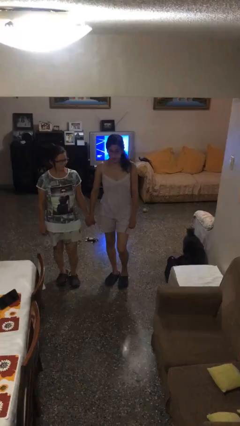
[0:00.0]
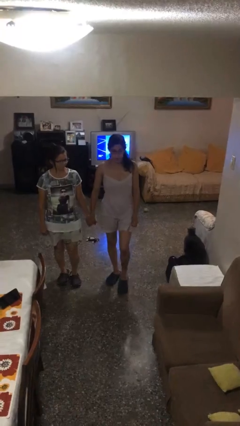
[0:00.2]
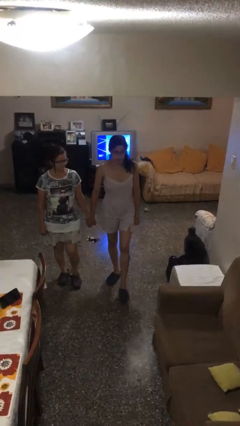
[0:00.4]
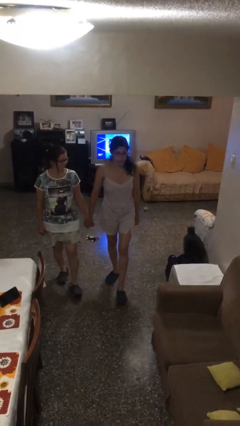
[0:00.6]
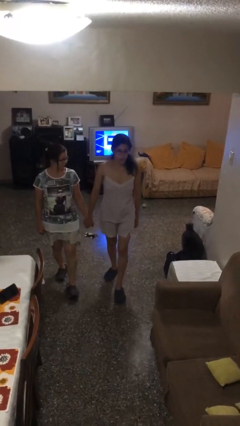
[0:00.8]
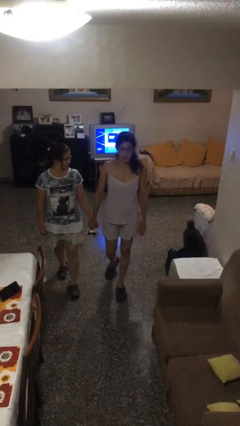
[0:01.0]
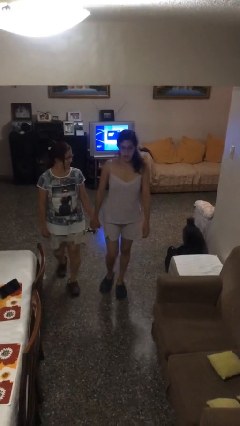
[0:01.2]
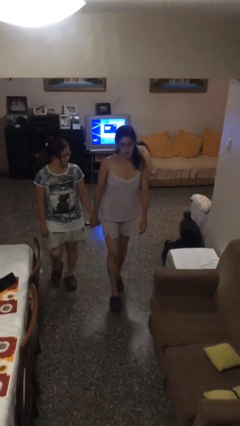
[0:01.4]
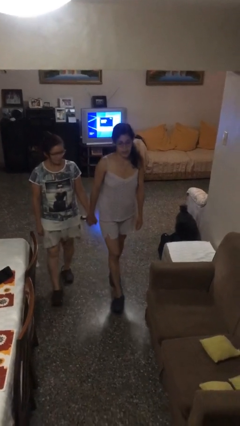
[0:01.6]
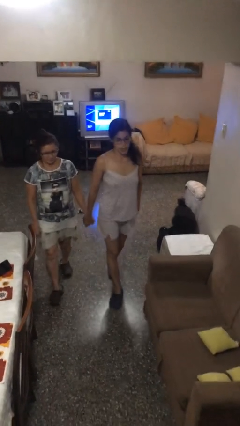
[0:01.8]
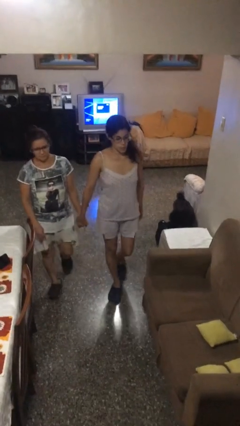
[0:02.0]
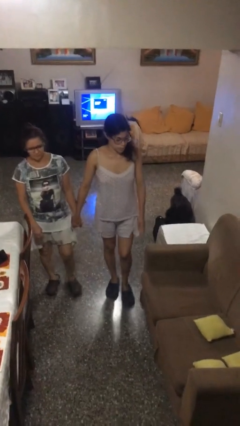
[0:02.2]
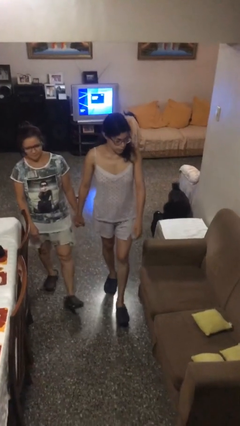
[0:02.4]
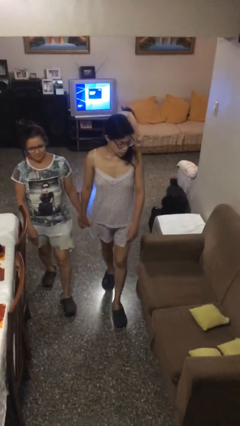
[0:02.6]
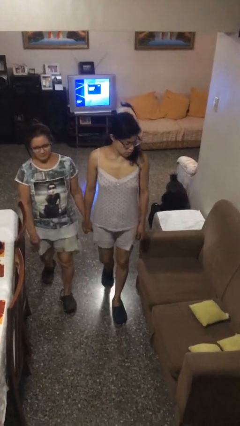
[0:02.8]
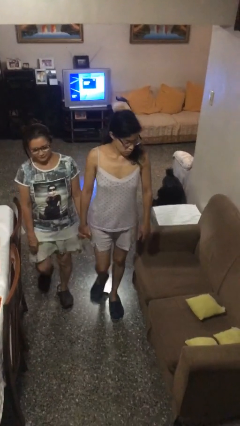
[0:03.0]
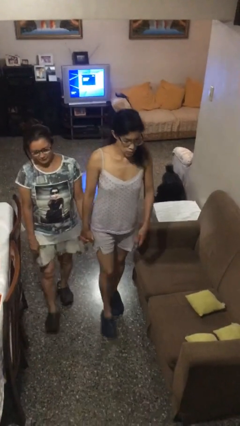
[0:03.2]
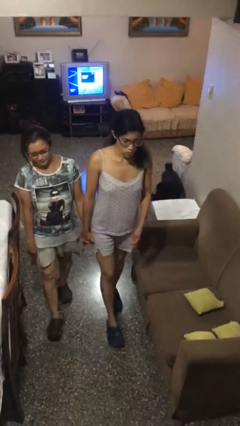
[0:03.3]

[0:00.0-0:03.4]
person holds hand

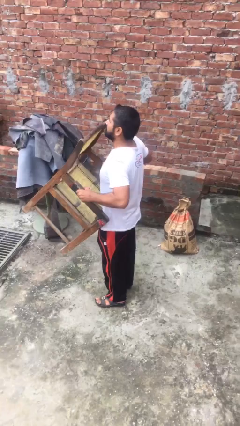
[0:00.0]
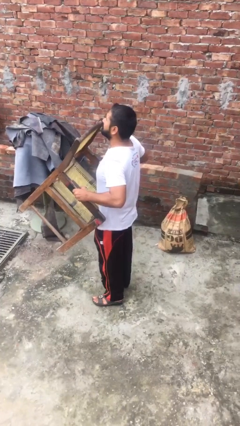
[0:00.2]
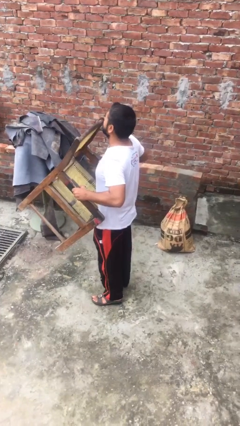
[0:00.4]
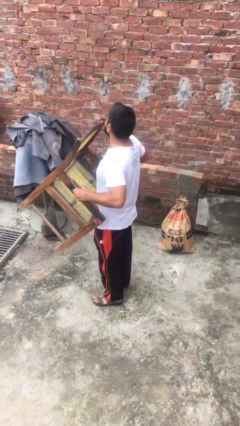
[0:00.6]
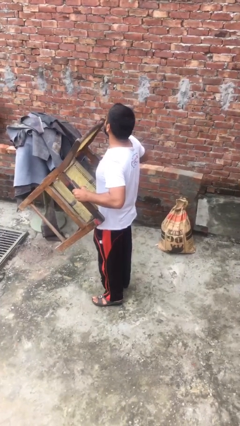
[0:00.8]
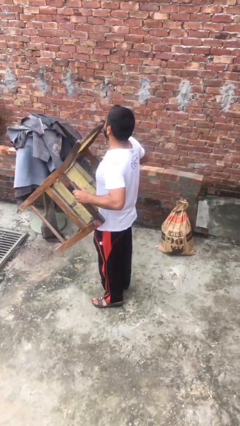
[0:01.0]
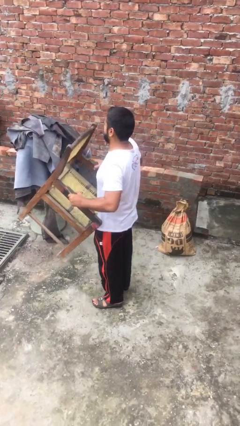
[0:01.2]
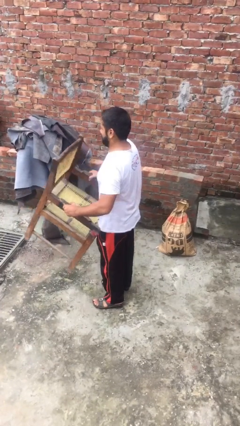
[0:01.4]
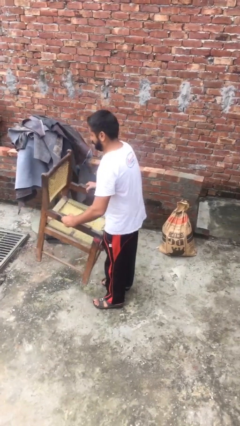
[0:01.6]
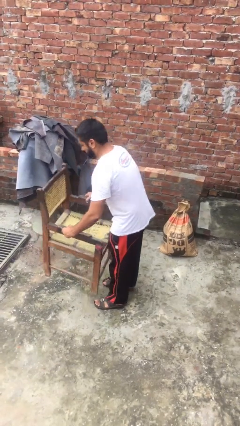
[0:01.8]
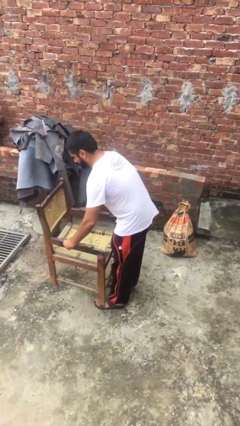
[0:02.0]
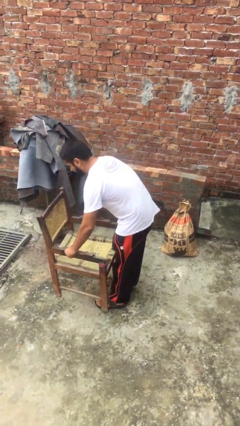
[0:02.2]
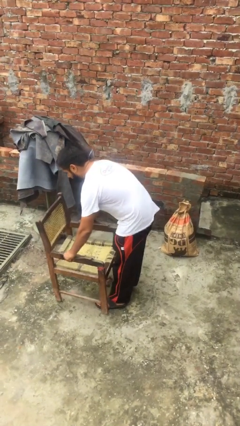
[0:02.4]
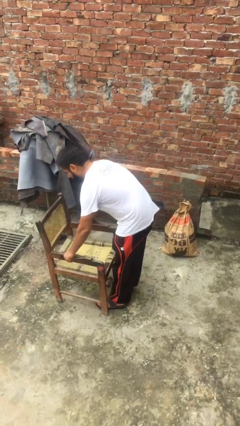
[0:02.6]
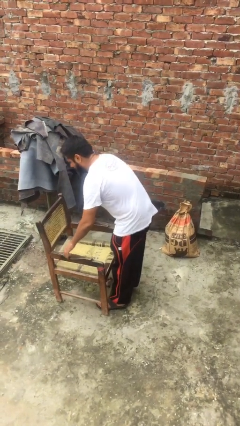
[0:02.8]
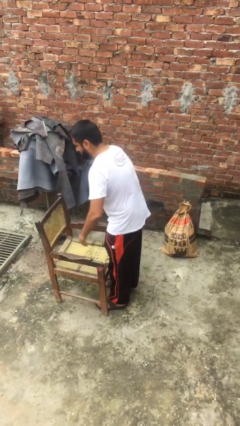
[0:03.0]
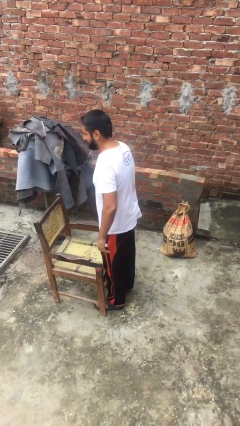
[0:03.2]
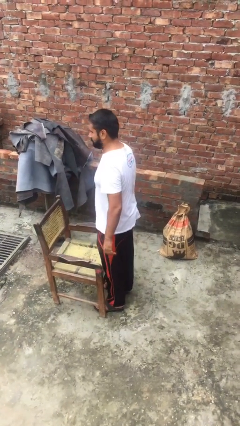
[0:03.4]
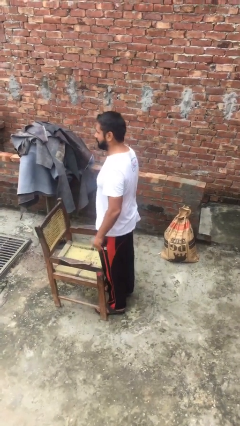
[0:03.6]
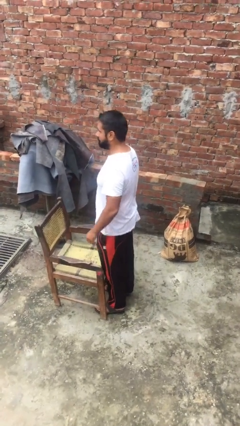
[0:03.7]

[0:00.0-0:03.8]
person puts down object on floor

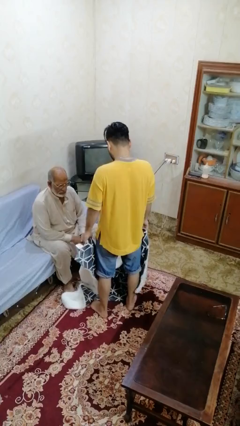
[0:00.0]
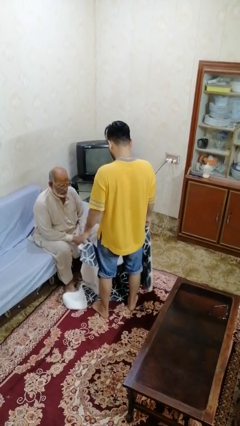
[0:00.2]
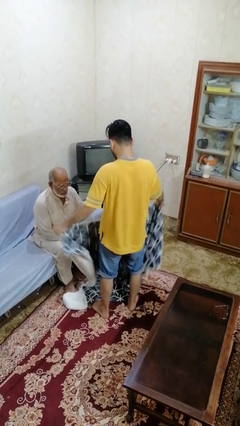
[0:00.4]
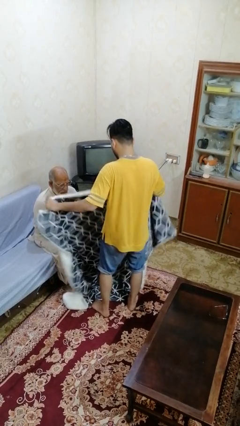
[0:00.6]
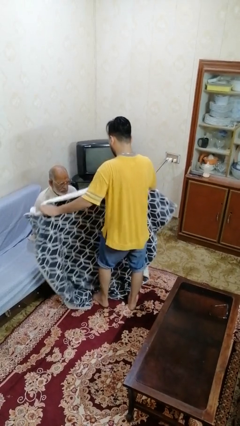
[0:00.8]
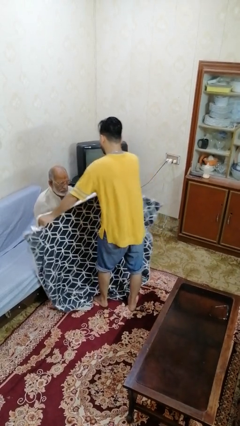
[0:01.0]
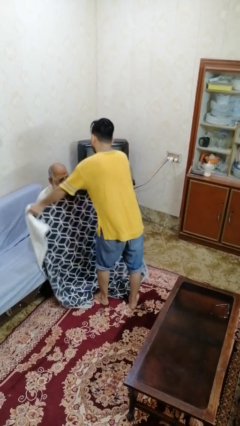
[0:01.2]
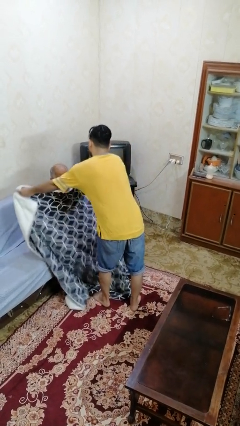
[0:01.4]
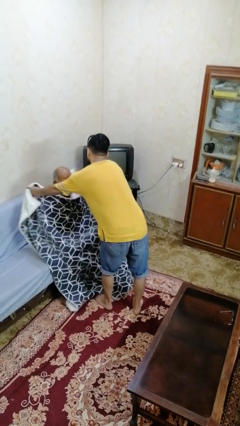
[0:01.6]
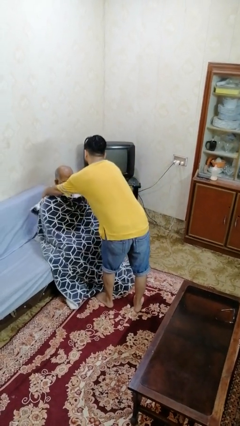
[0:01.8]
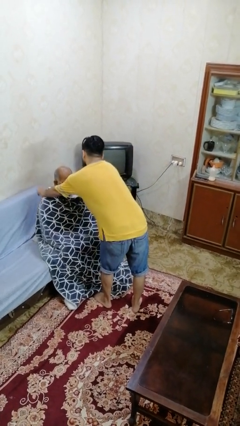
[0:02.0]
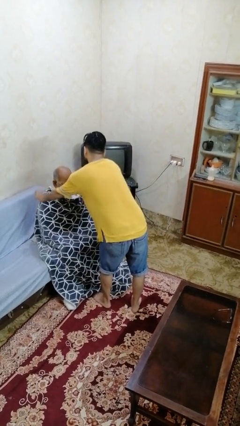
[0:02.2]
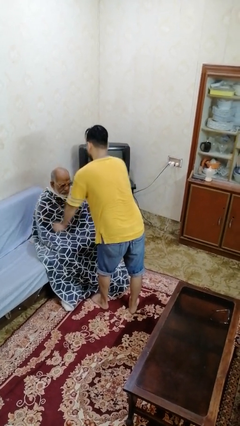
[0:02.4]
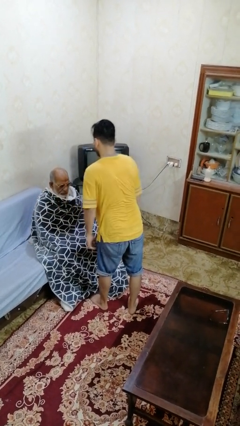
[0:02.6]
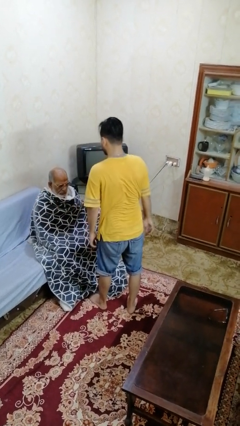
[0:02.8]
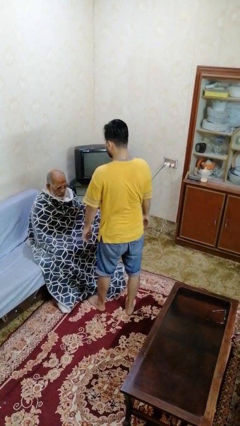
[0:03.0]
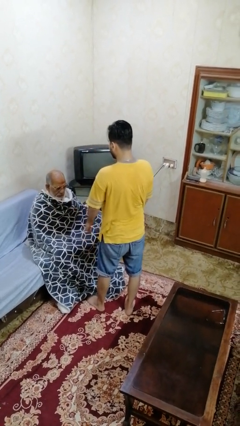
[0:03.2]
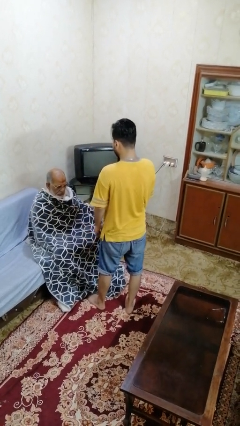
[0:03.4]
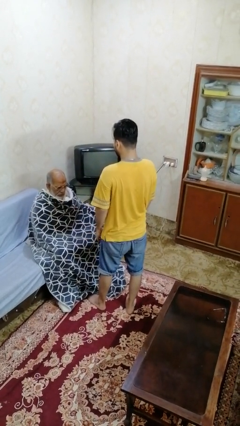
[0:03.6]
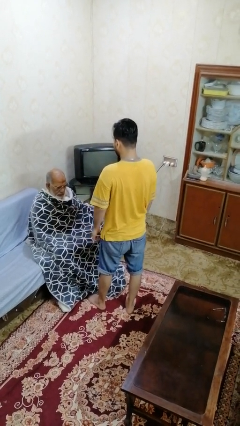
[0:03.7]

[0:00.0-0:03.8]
person covers friend with blanket

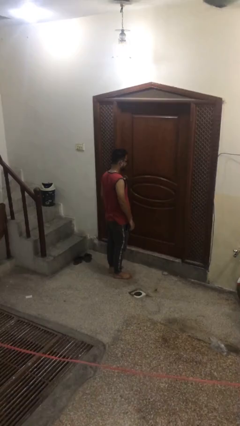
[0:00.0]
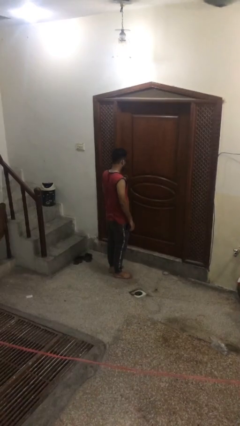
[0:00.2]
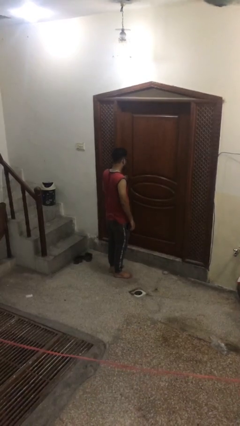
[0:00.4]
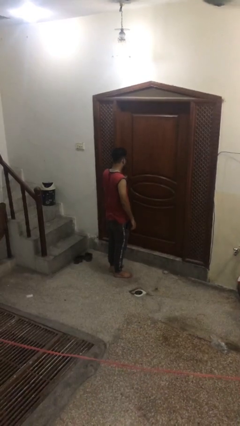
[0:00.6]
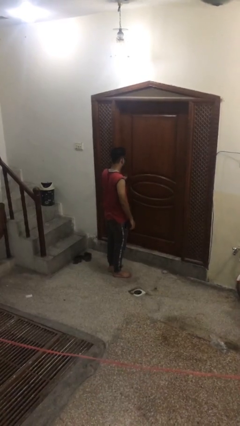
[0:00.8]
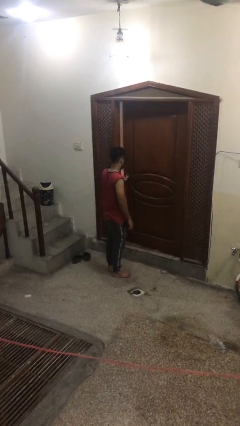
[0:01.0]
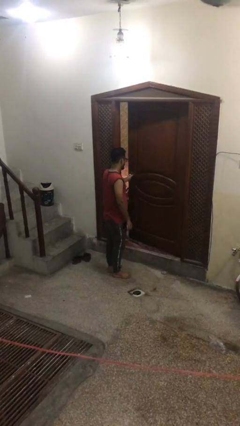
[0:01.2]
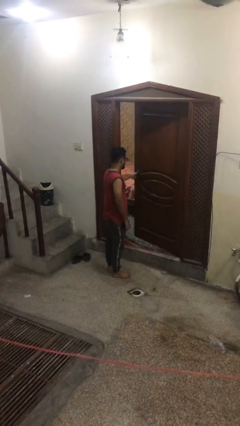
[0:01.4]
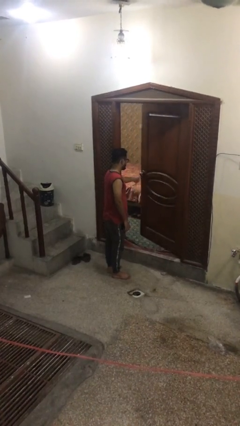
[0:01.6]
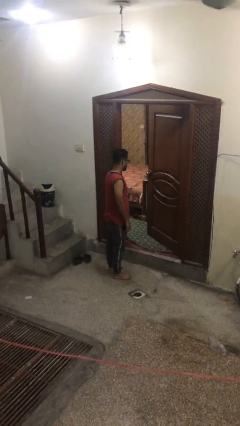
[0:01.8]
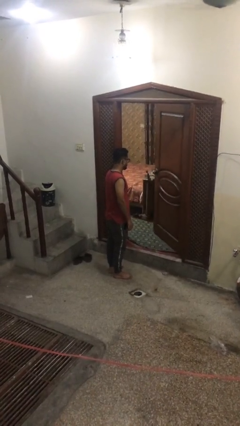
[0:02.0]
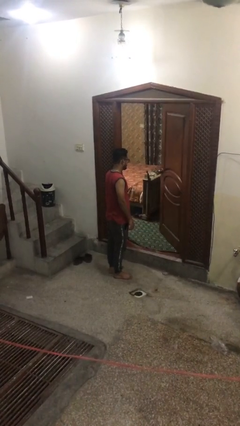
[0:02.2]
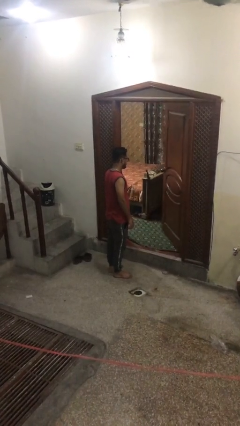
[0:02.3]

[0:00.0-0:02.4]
person opens facility door

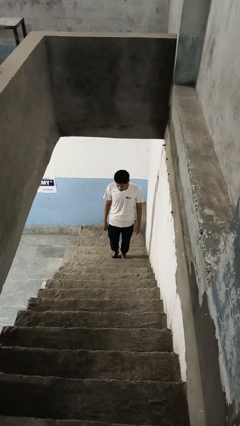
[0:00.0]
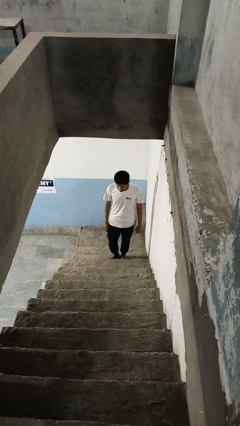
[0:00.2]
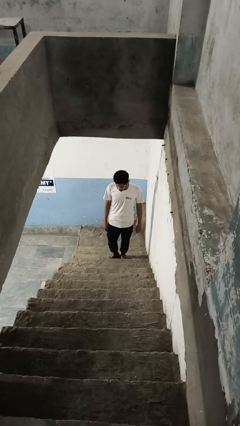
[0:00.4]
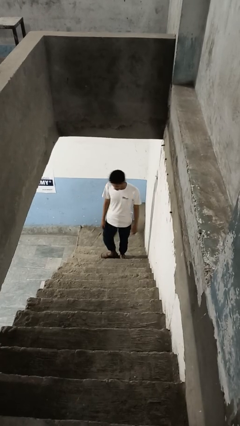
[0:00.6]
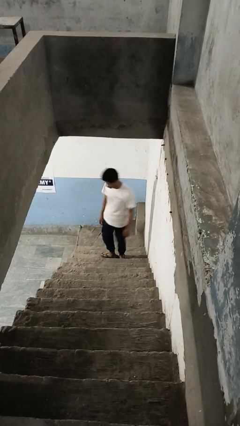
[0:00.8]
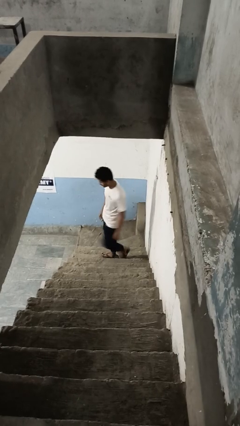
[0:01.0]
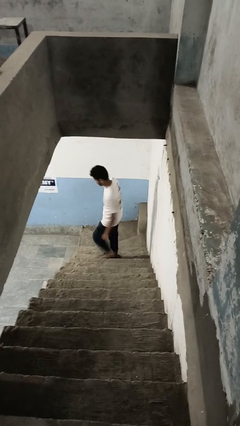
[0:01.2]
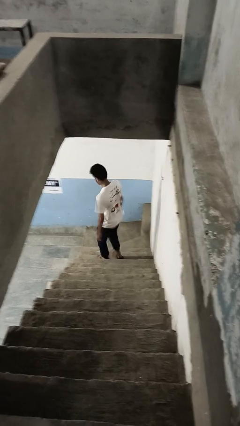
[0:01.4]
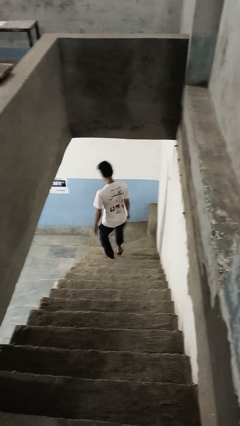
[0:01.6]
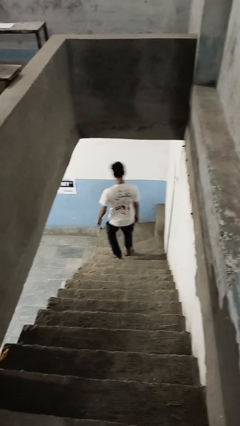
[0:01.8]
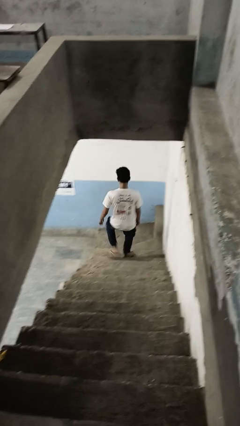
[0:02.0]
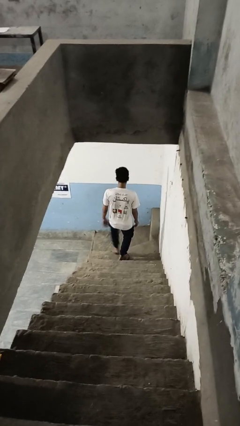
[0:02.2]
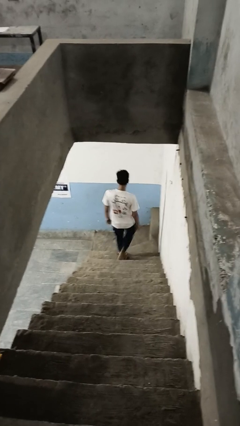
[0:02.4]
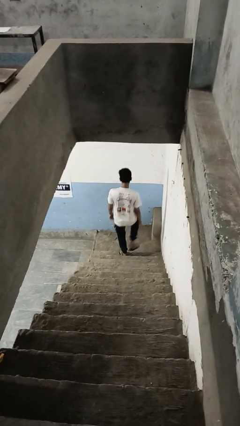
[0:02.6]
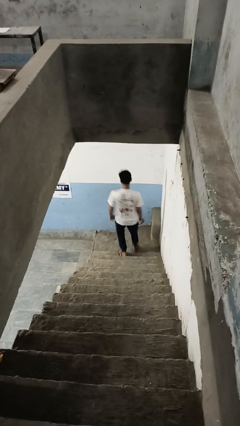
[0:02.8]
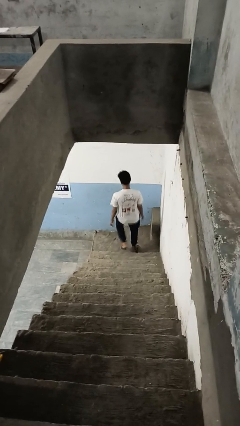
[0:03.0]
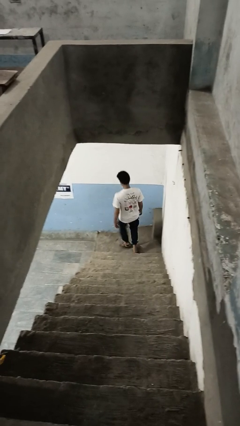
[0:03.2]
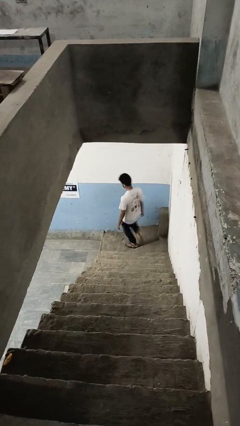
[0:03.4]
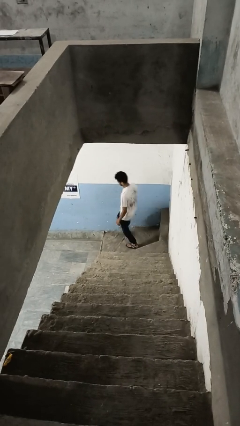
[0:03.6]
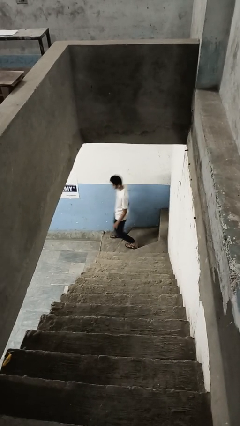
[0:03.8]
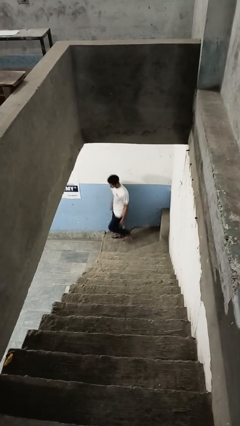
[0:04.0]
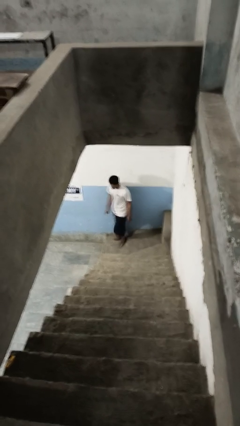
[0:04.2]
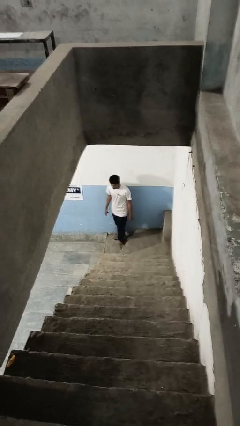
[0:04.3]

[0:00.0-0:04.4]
person climbs down stairs
